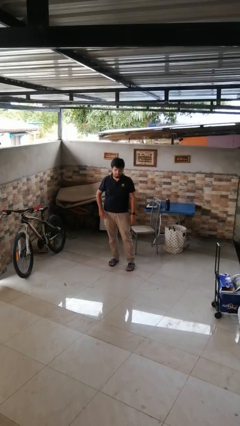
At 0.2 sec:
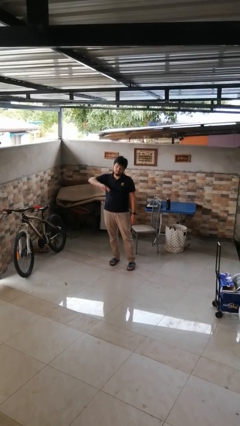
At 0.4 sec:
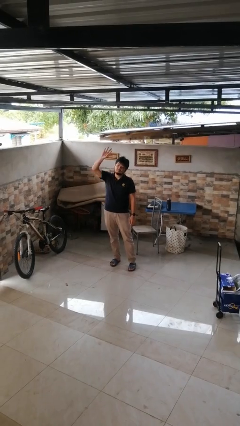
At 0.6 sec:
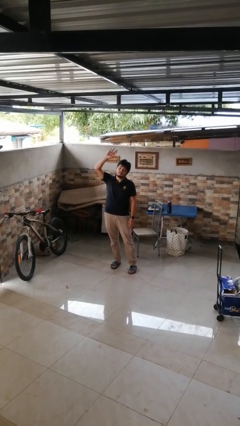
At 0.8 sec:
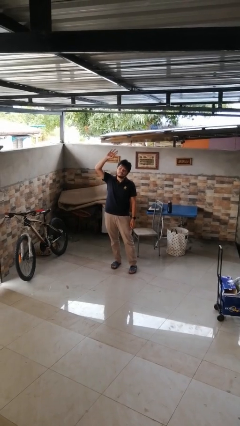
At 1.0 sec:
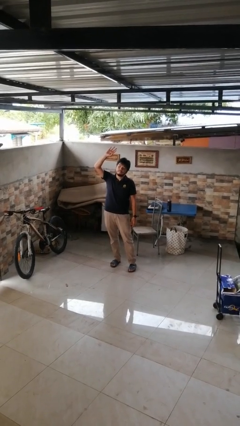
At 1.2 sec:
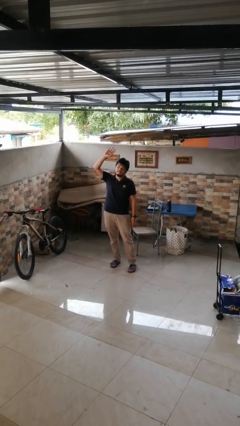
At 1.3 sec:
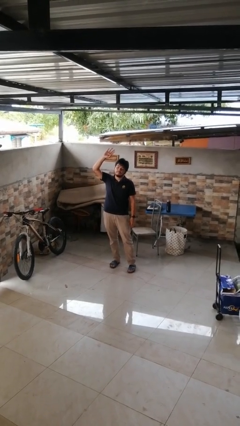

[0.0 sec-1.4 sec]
person gestures swipe up

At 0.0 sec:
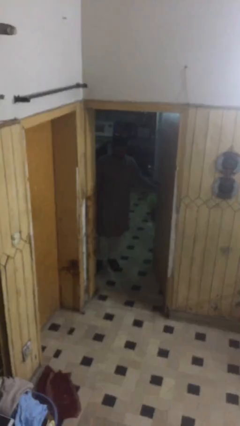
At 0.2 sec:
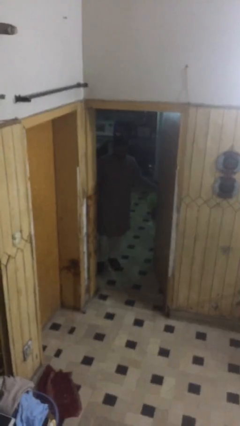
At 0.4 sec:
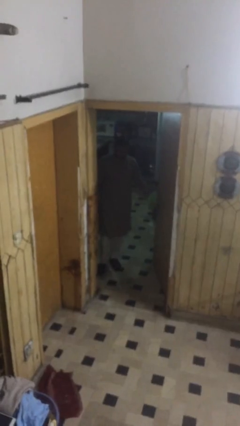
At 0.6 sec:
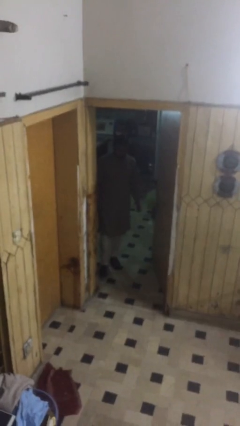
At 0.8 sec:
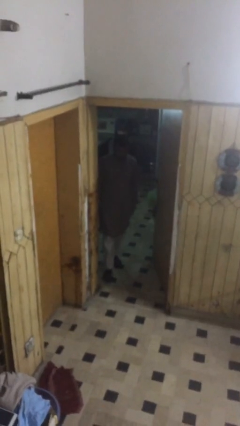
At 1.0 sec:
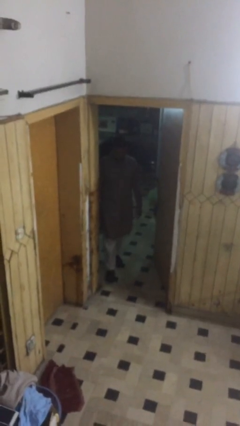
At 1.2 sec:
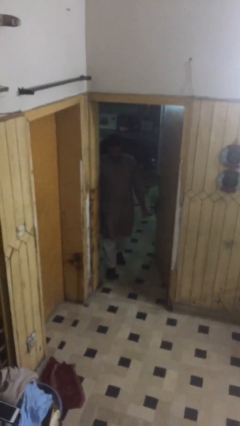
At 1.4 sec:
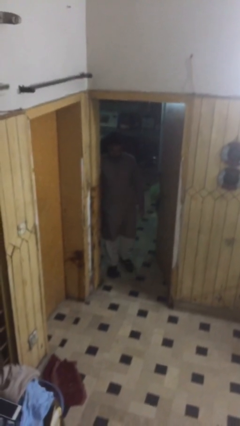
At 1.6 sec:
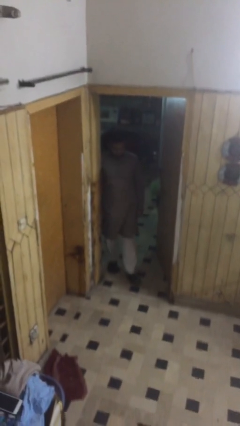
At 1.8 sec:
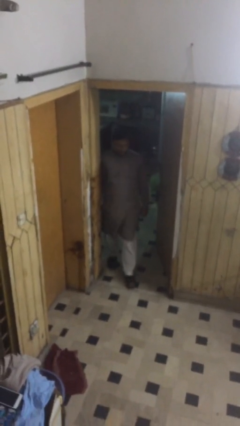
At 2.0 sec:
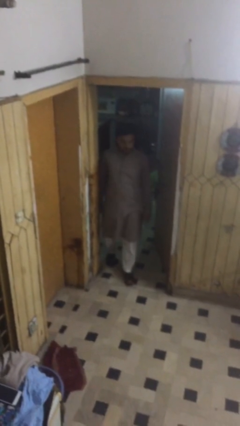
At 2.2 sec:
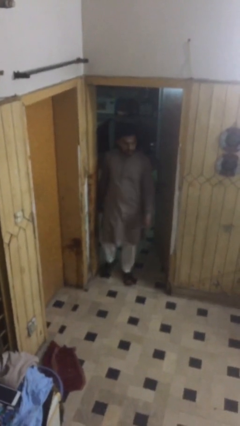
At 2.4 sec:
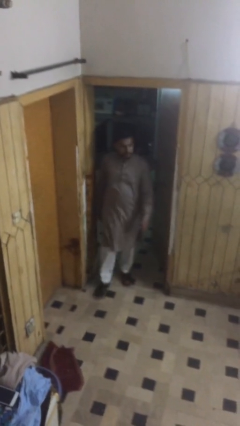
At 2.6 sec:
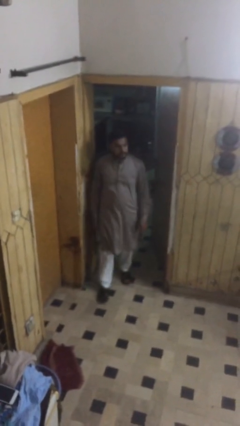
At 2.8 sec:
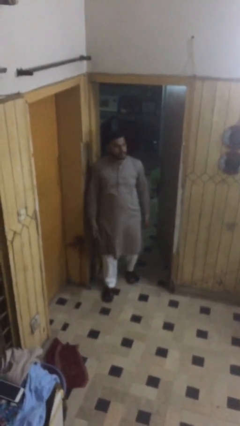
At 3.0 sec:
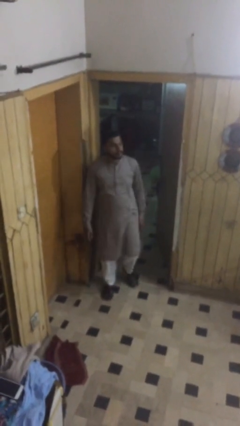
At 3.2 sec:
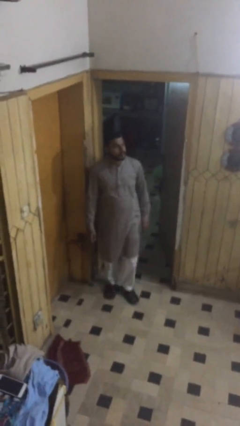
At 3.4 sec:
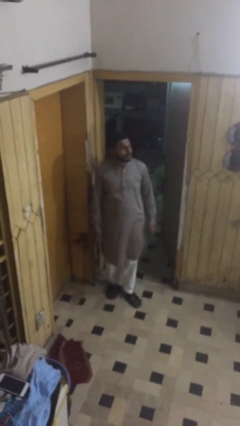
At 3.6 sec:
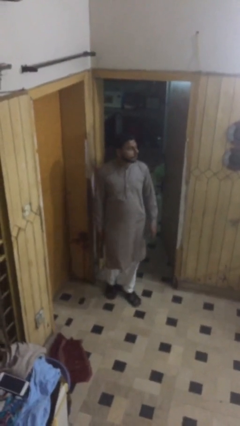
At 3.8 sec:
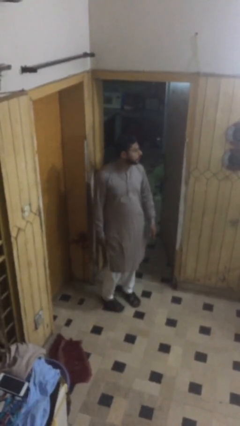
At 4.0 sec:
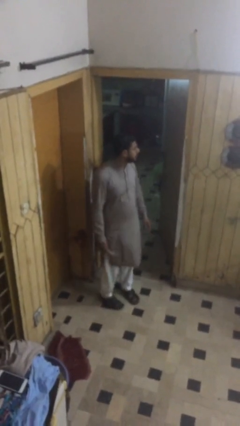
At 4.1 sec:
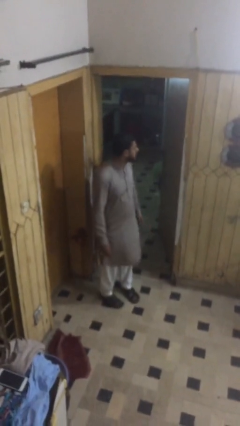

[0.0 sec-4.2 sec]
person enters scene through structure

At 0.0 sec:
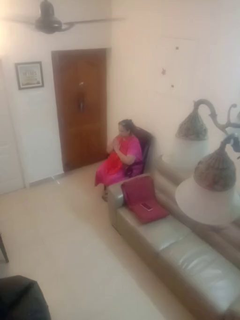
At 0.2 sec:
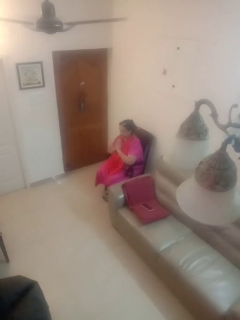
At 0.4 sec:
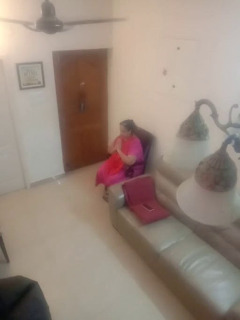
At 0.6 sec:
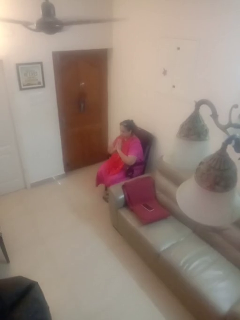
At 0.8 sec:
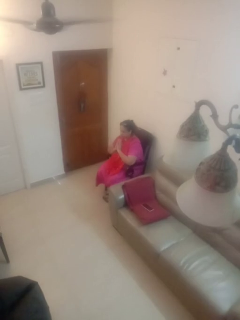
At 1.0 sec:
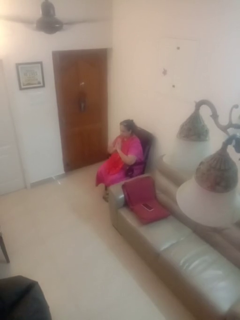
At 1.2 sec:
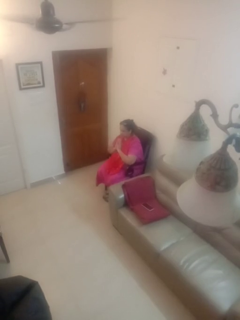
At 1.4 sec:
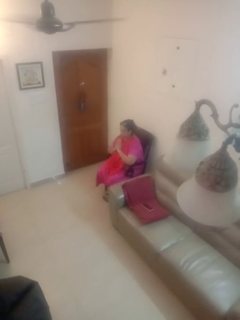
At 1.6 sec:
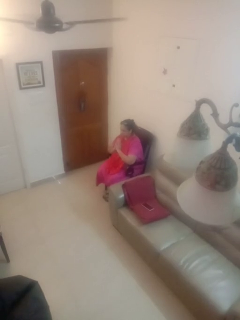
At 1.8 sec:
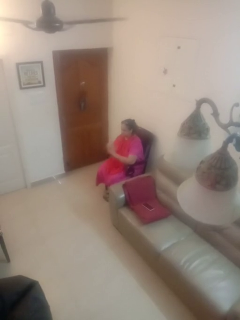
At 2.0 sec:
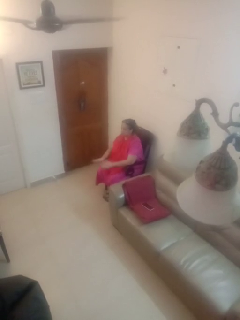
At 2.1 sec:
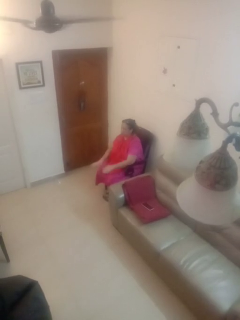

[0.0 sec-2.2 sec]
person prays

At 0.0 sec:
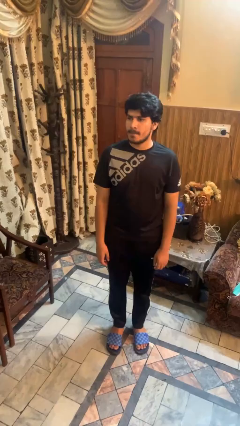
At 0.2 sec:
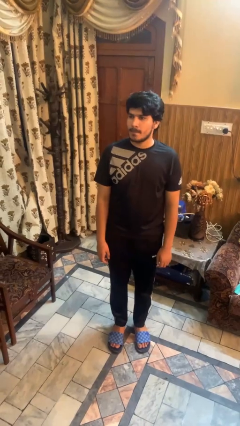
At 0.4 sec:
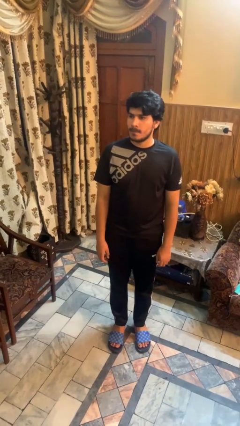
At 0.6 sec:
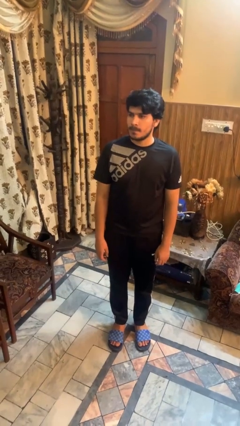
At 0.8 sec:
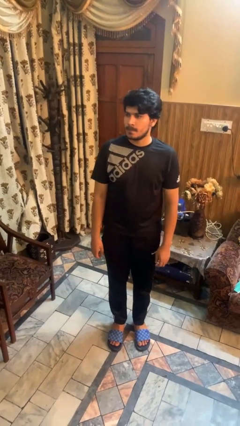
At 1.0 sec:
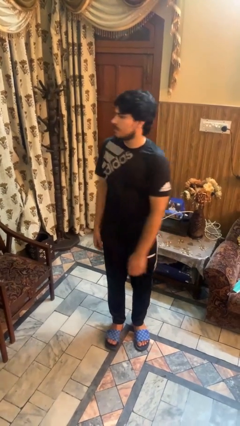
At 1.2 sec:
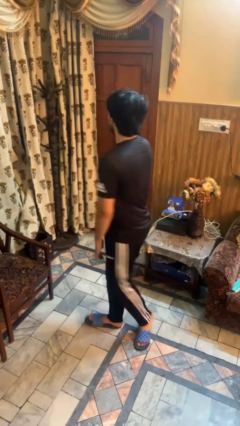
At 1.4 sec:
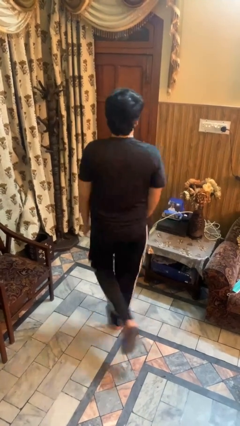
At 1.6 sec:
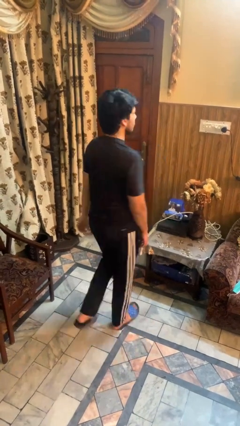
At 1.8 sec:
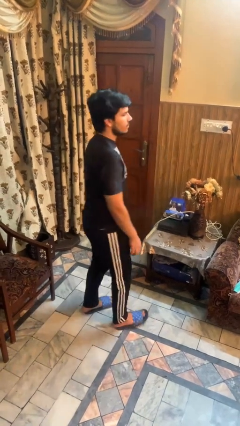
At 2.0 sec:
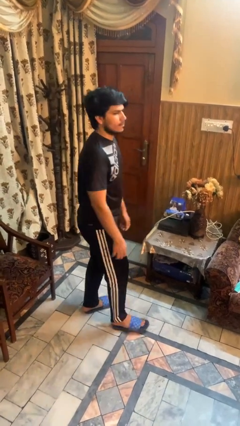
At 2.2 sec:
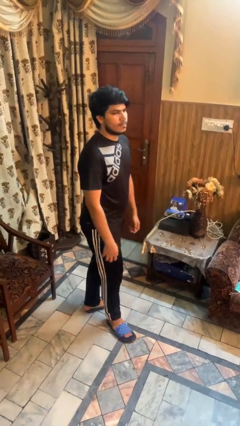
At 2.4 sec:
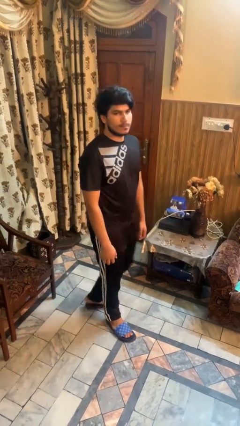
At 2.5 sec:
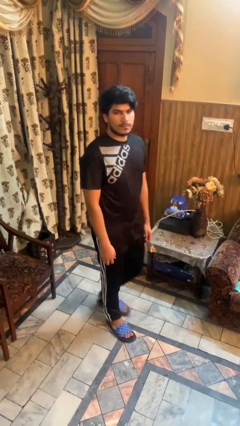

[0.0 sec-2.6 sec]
person twirls

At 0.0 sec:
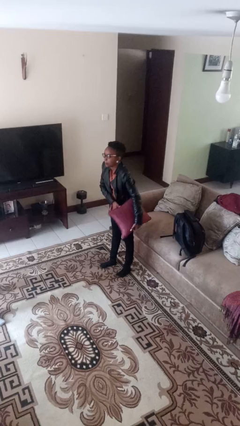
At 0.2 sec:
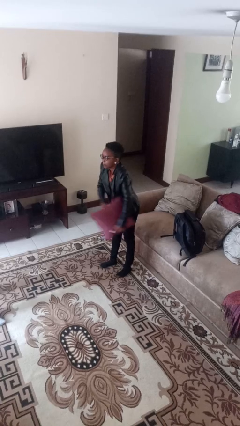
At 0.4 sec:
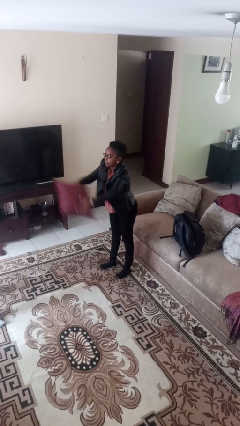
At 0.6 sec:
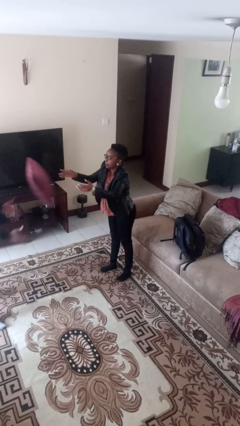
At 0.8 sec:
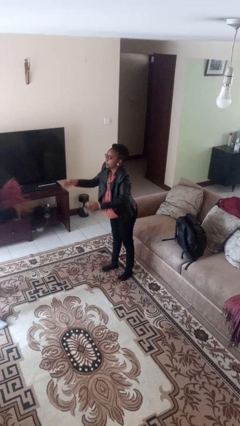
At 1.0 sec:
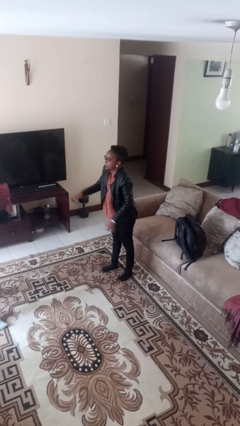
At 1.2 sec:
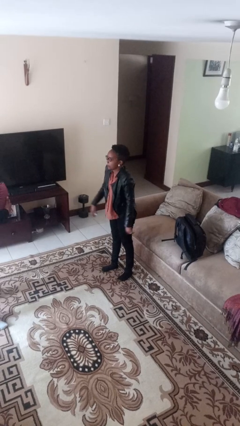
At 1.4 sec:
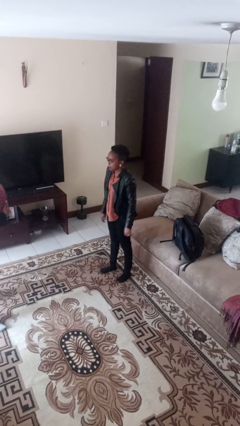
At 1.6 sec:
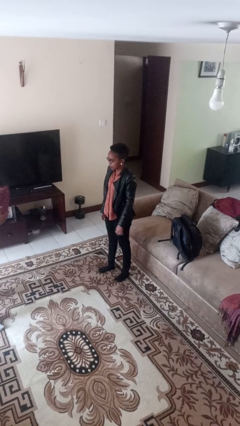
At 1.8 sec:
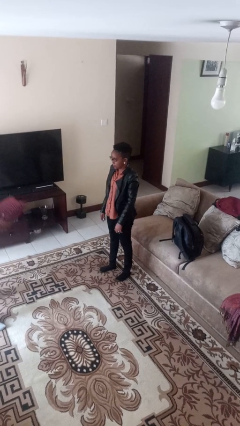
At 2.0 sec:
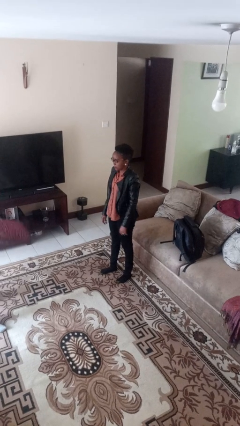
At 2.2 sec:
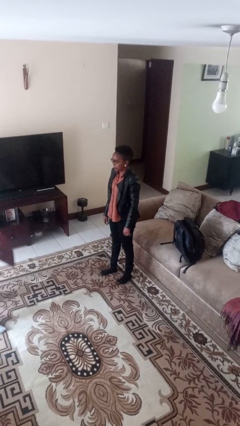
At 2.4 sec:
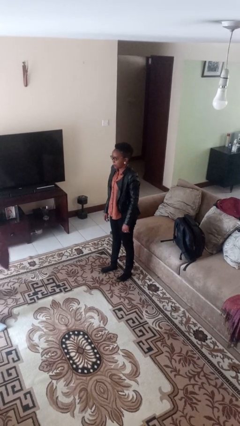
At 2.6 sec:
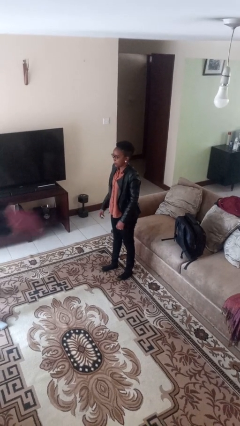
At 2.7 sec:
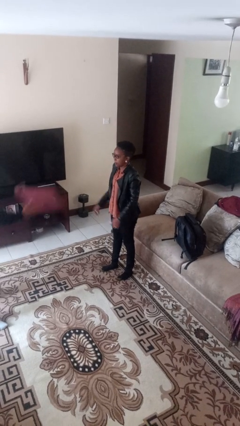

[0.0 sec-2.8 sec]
person throws object to person

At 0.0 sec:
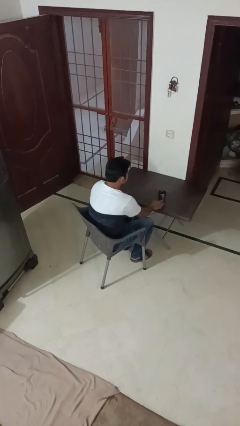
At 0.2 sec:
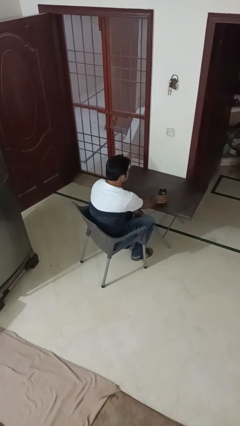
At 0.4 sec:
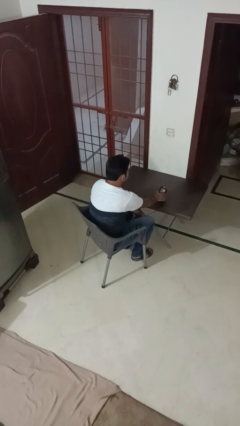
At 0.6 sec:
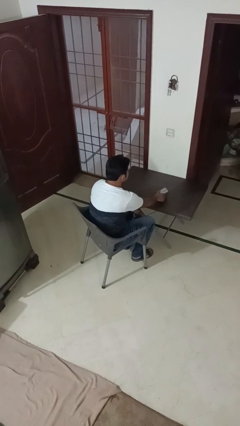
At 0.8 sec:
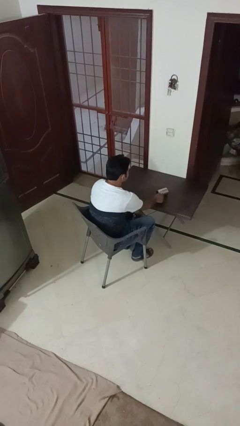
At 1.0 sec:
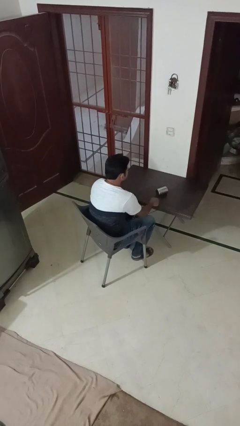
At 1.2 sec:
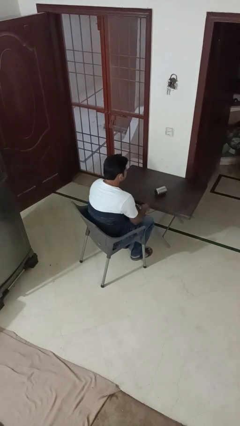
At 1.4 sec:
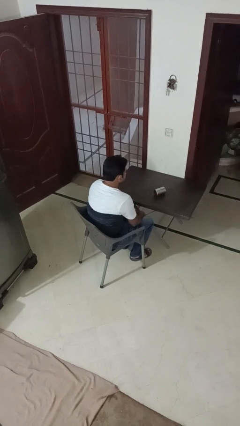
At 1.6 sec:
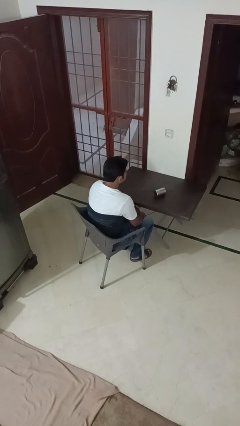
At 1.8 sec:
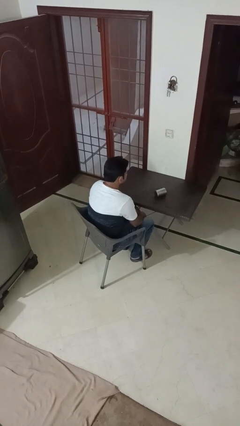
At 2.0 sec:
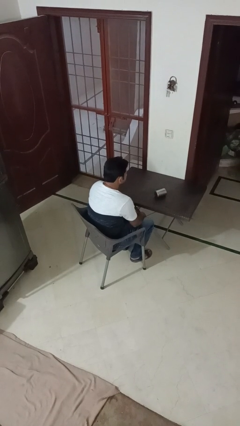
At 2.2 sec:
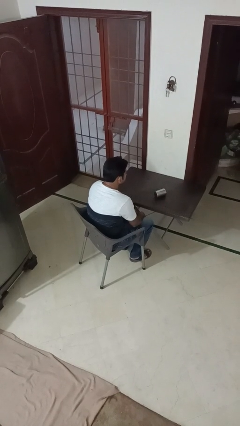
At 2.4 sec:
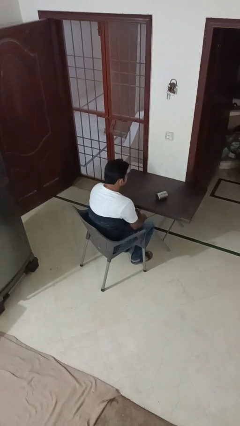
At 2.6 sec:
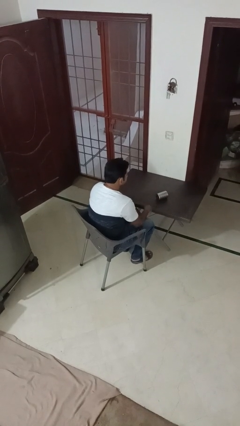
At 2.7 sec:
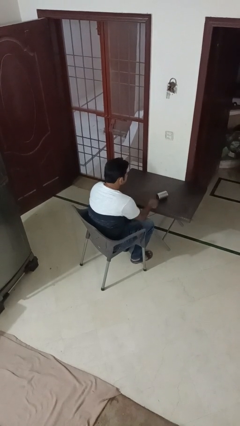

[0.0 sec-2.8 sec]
person knocks over glass

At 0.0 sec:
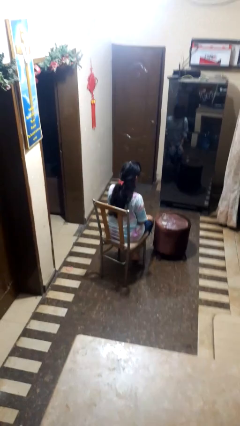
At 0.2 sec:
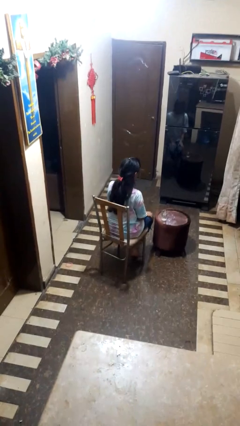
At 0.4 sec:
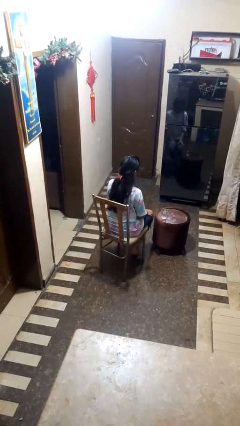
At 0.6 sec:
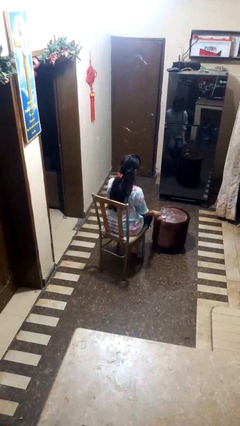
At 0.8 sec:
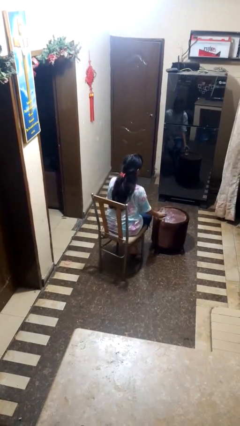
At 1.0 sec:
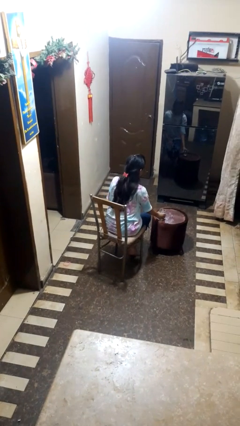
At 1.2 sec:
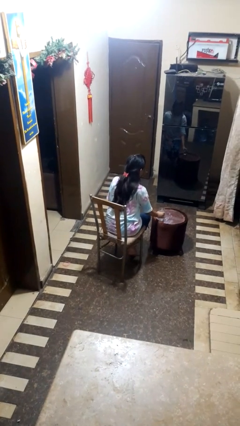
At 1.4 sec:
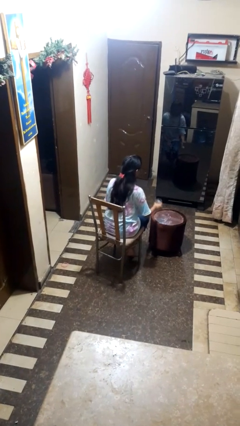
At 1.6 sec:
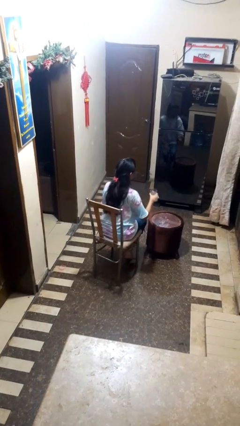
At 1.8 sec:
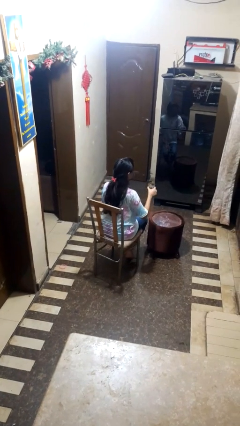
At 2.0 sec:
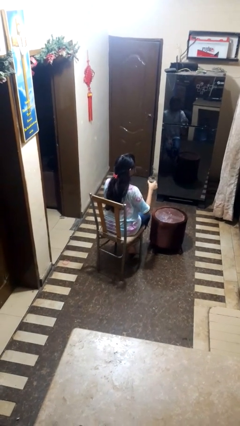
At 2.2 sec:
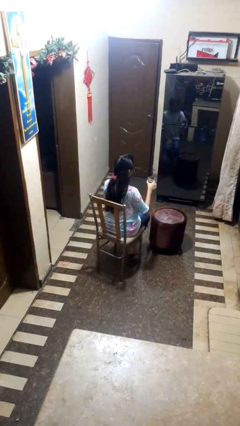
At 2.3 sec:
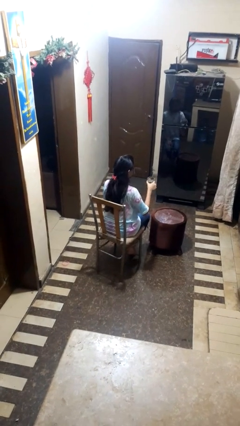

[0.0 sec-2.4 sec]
person picks up object from table
